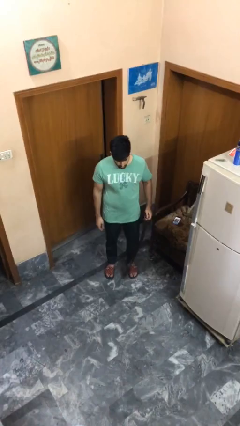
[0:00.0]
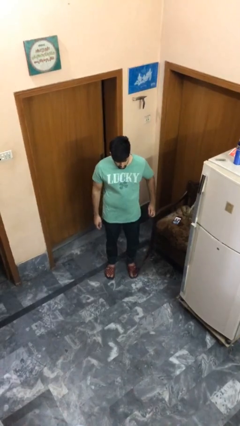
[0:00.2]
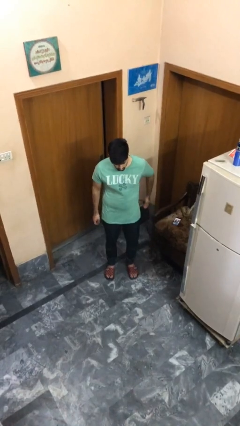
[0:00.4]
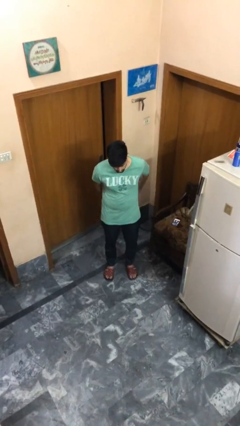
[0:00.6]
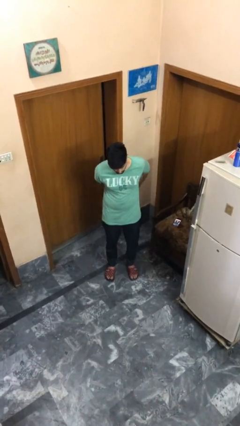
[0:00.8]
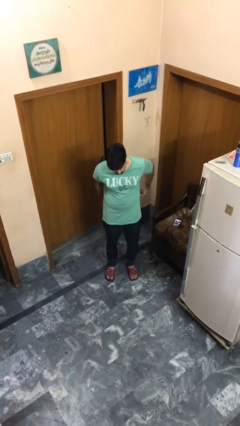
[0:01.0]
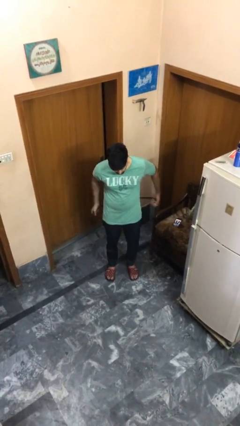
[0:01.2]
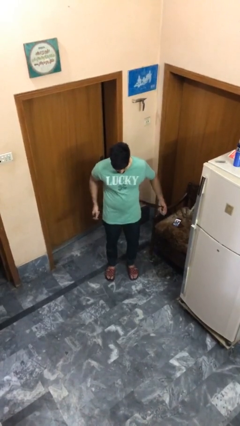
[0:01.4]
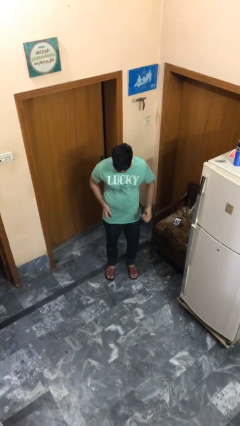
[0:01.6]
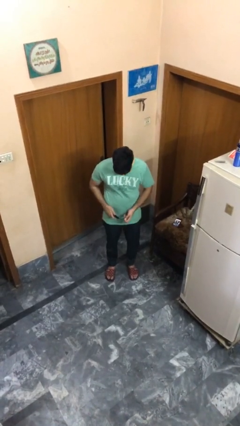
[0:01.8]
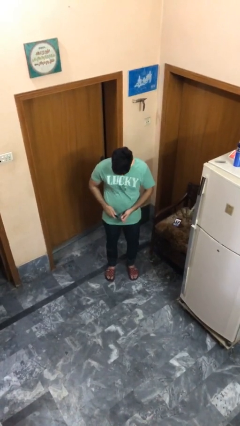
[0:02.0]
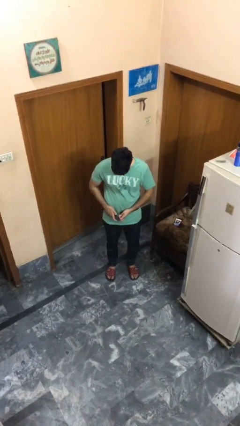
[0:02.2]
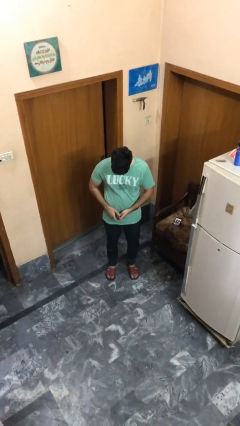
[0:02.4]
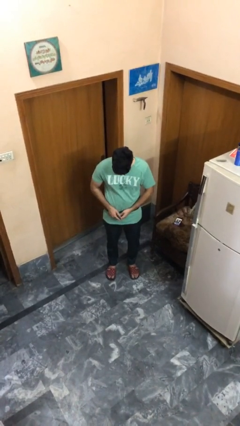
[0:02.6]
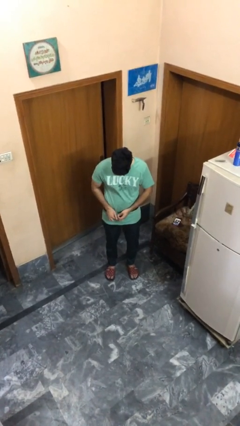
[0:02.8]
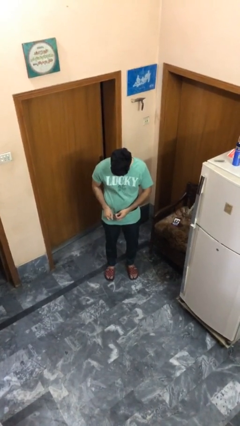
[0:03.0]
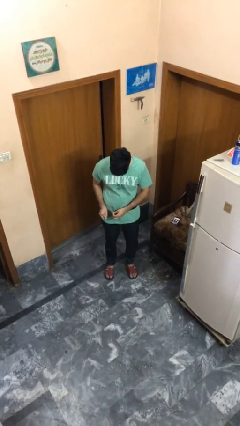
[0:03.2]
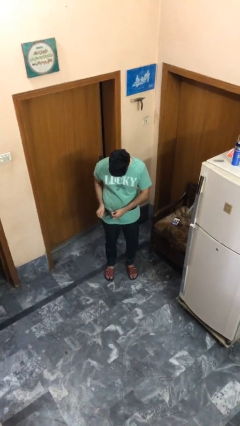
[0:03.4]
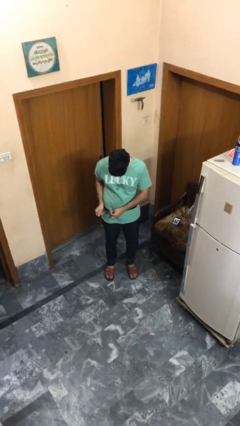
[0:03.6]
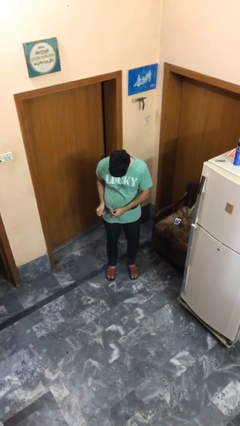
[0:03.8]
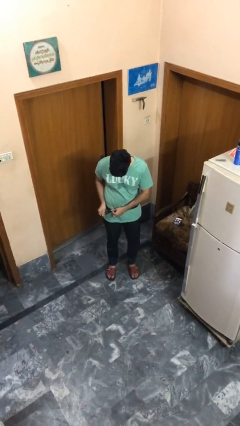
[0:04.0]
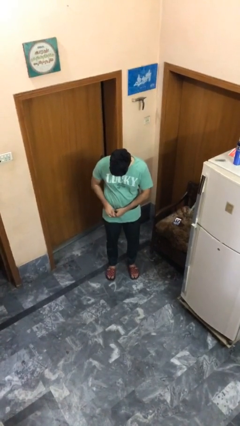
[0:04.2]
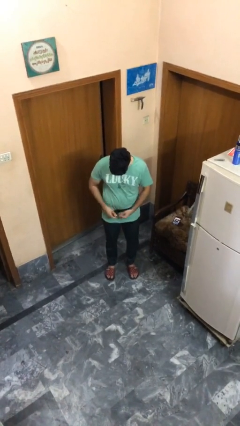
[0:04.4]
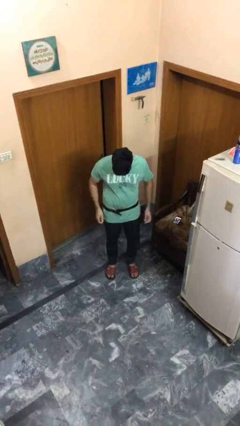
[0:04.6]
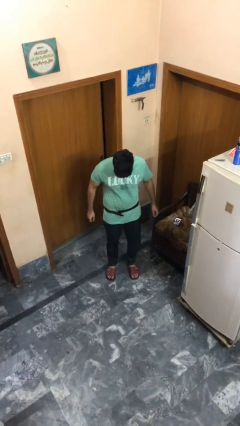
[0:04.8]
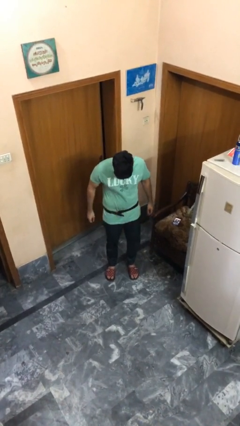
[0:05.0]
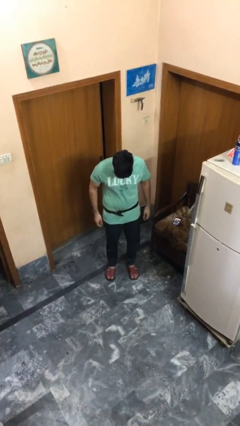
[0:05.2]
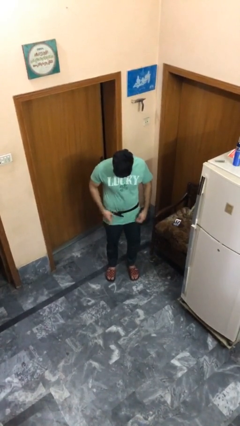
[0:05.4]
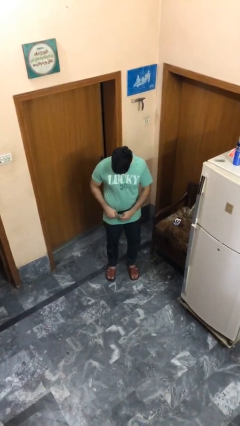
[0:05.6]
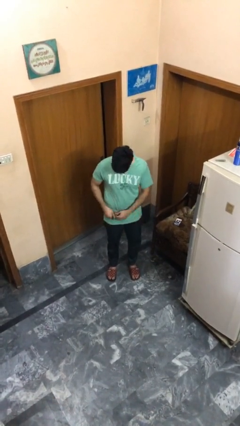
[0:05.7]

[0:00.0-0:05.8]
person puts on belt

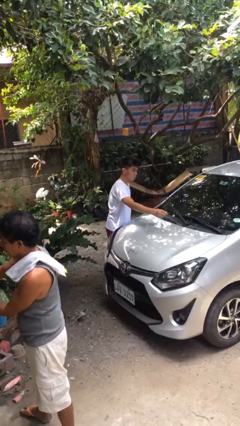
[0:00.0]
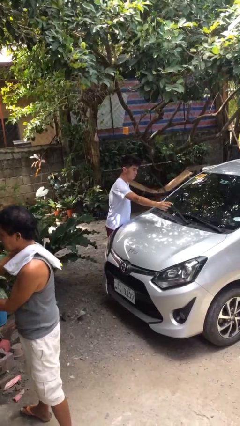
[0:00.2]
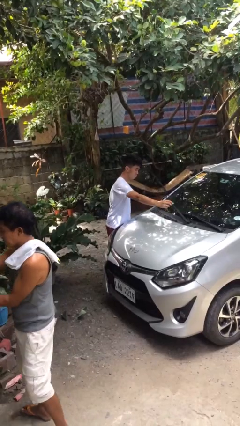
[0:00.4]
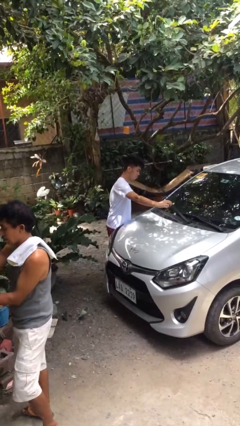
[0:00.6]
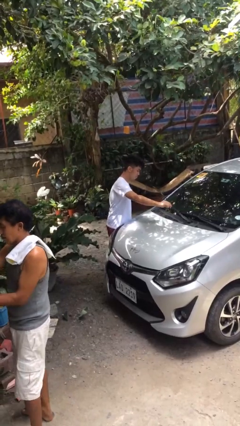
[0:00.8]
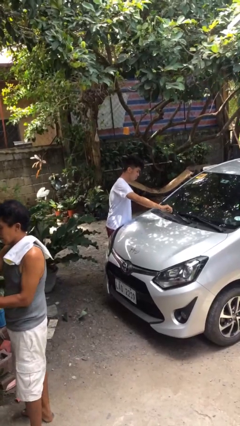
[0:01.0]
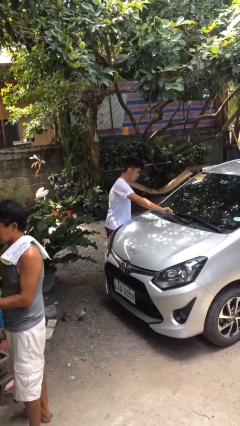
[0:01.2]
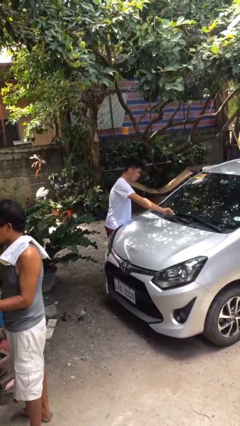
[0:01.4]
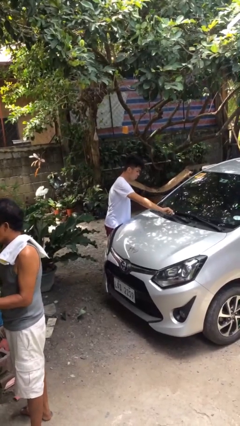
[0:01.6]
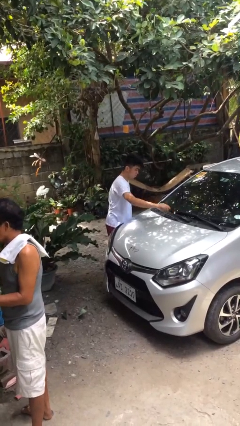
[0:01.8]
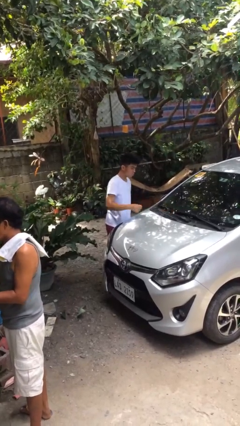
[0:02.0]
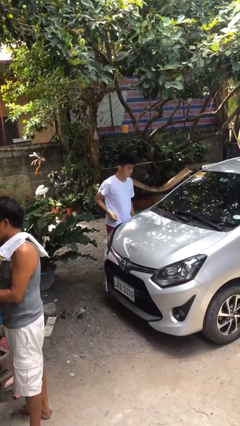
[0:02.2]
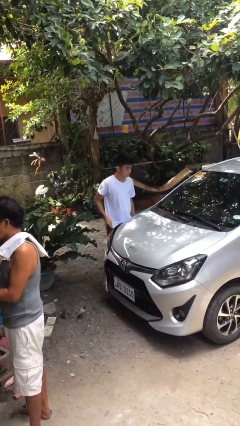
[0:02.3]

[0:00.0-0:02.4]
person flips down car wipers

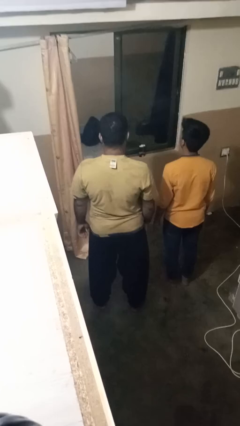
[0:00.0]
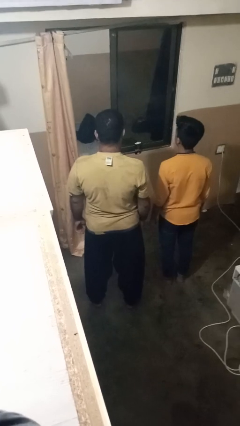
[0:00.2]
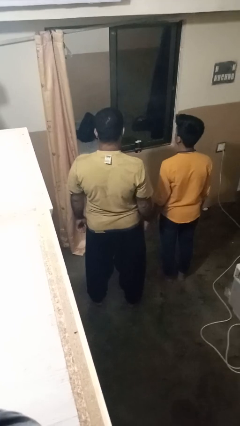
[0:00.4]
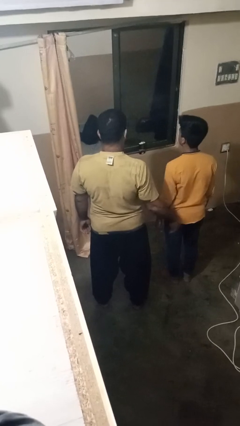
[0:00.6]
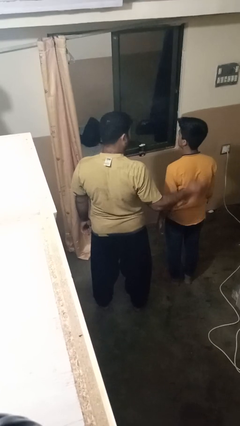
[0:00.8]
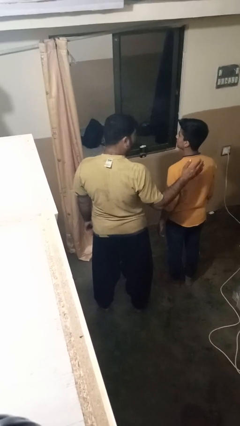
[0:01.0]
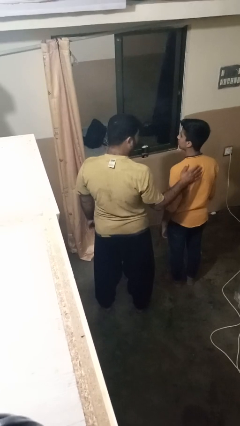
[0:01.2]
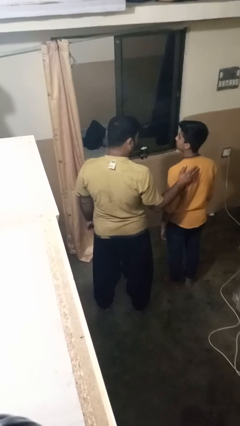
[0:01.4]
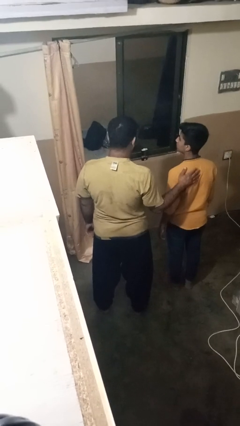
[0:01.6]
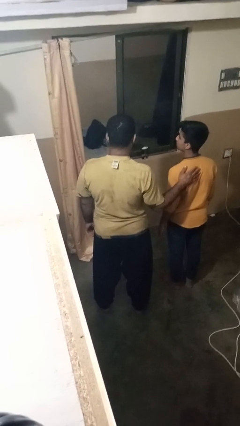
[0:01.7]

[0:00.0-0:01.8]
person touches back of person

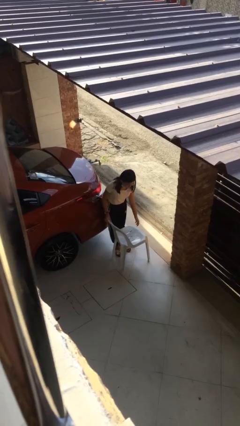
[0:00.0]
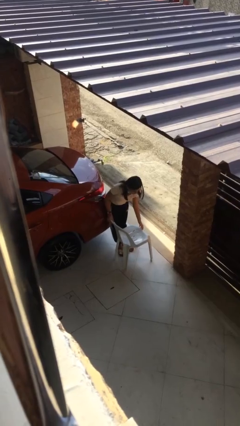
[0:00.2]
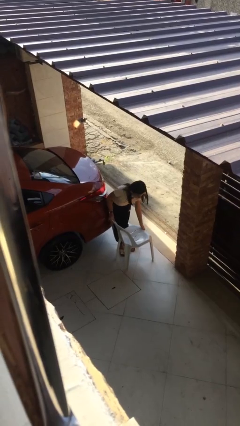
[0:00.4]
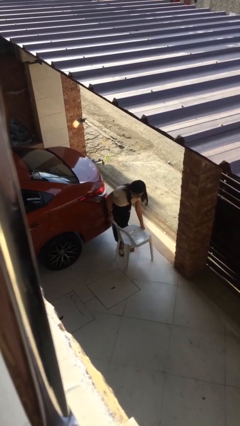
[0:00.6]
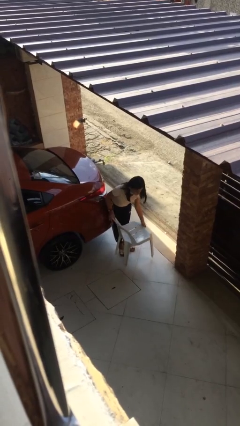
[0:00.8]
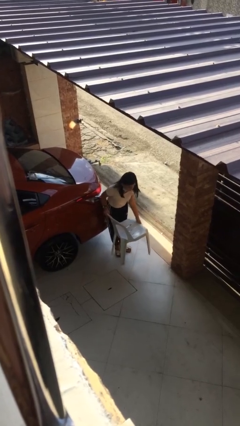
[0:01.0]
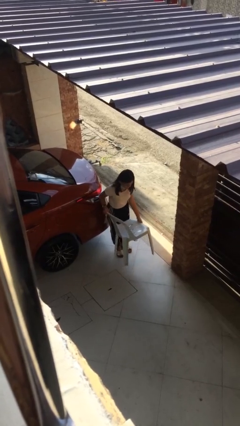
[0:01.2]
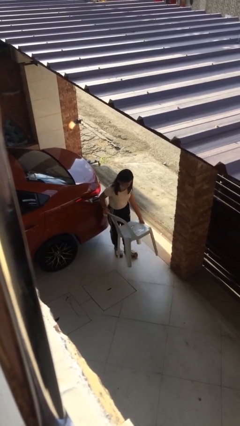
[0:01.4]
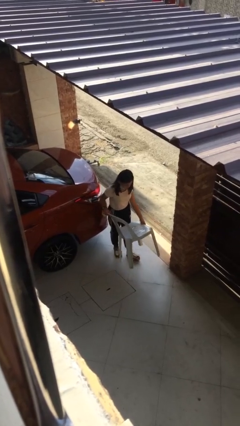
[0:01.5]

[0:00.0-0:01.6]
person picks up object from floor

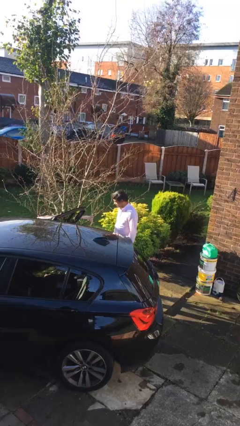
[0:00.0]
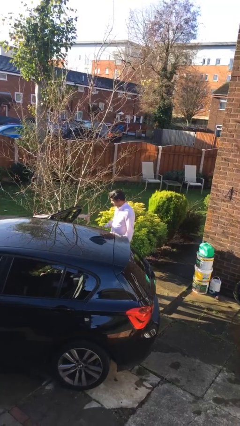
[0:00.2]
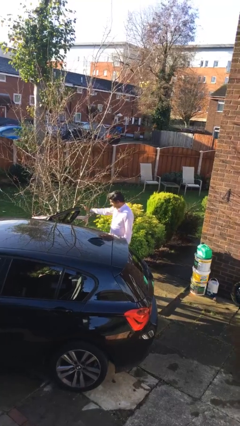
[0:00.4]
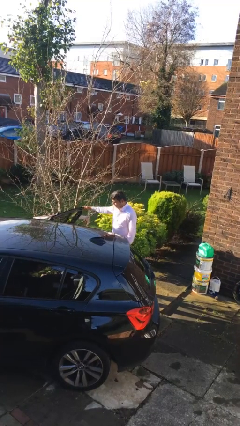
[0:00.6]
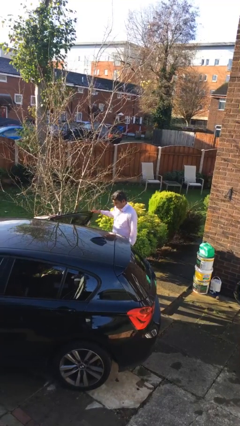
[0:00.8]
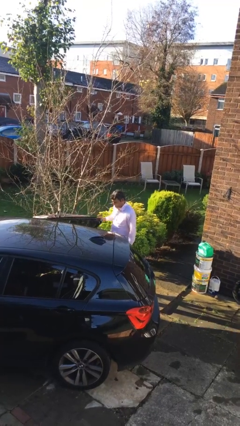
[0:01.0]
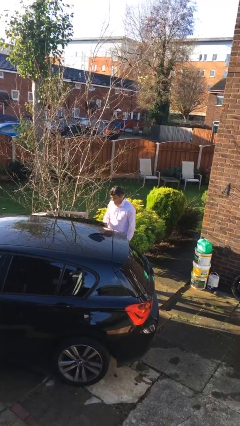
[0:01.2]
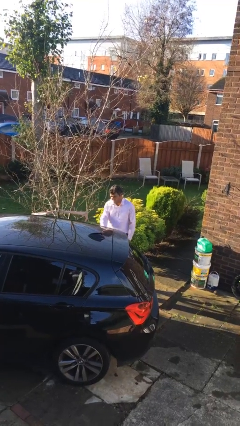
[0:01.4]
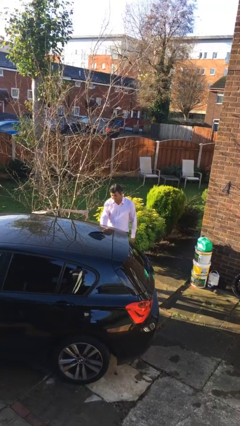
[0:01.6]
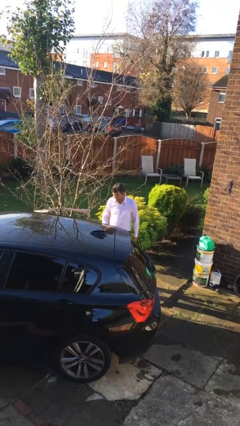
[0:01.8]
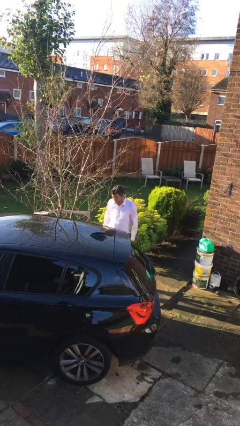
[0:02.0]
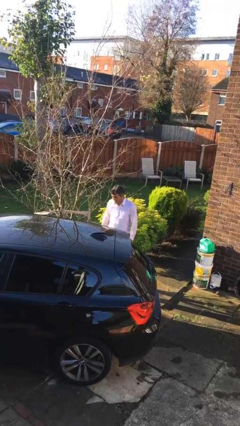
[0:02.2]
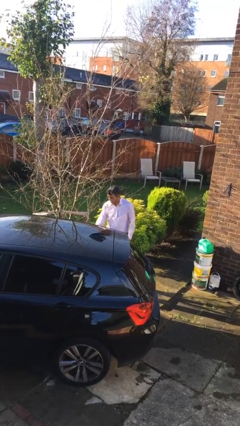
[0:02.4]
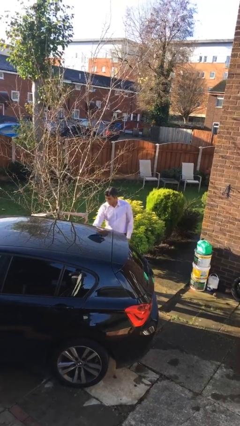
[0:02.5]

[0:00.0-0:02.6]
person closes car door

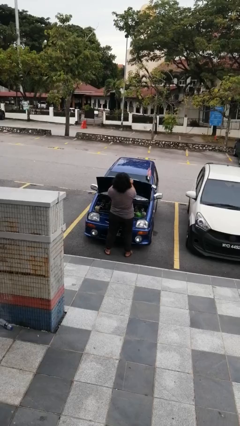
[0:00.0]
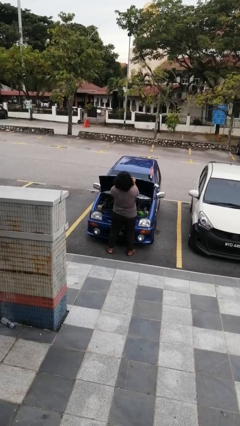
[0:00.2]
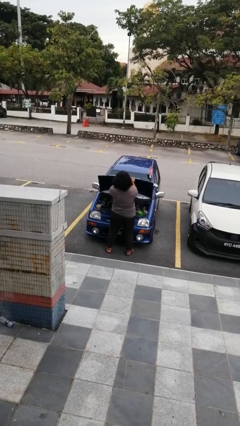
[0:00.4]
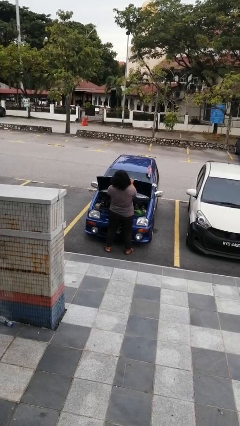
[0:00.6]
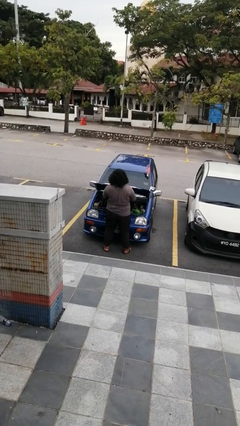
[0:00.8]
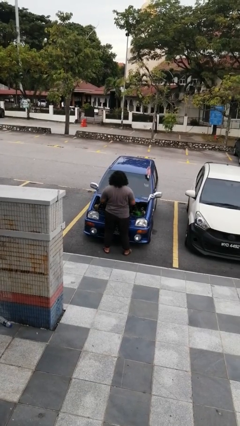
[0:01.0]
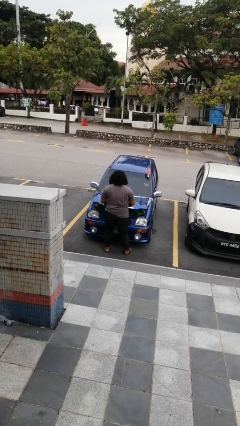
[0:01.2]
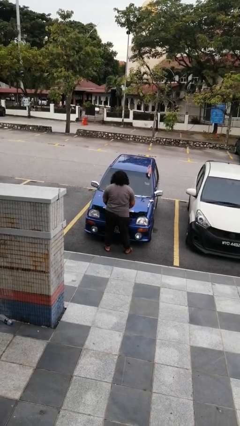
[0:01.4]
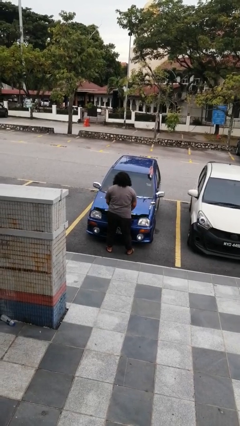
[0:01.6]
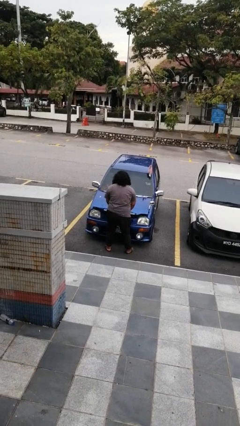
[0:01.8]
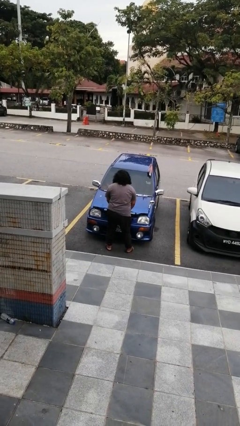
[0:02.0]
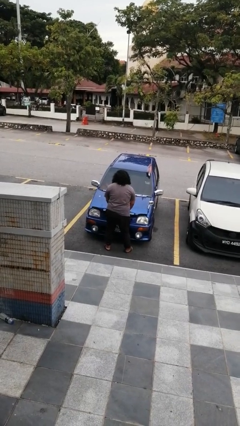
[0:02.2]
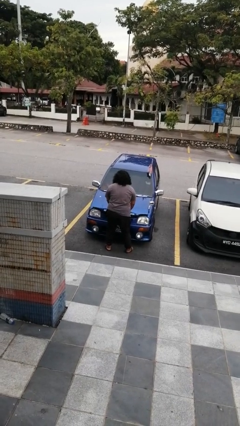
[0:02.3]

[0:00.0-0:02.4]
person closes car hood

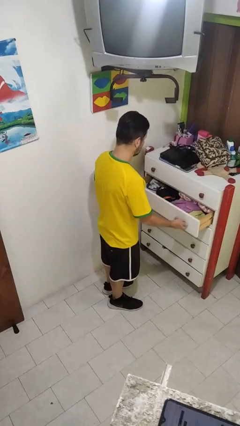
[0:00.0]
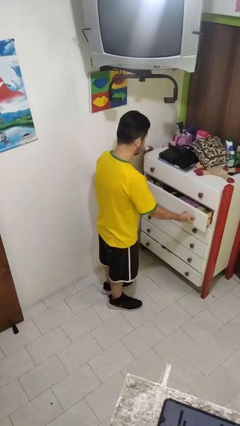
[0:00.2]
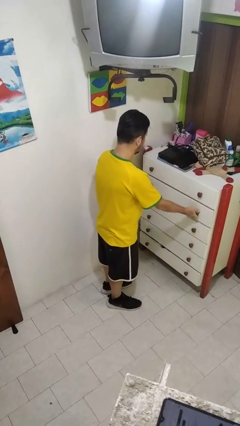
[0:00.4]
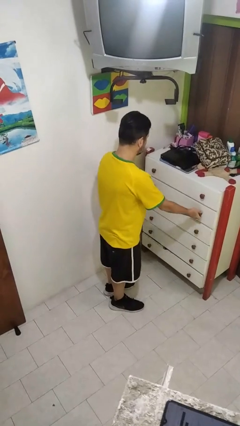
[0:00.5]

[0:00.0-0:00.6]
person closes dresser drawer
